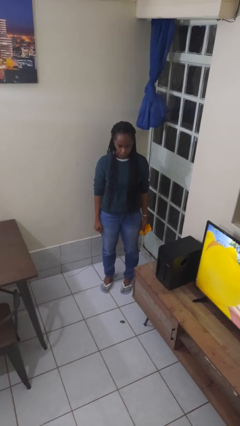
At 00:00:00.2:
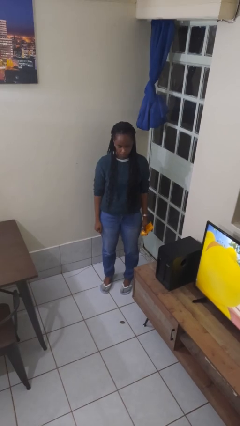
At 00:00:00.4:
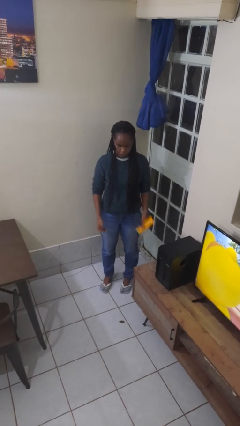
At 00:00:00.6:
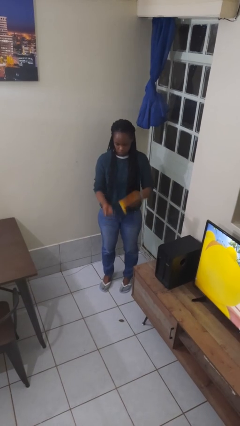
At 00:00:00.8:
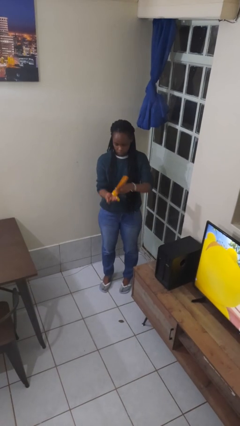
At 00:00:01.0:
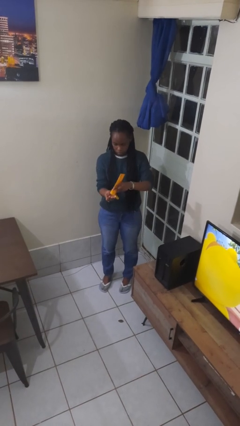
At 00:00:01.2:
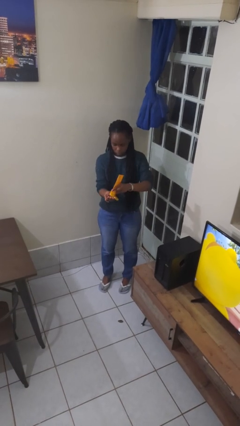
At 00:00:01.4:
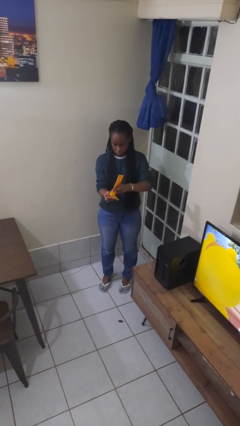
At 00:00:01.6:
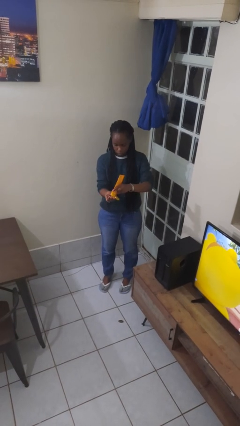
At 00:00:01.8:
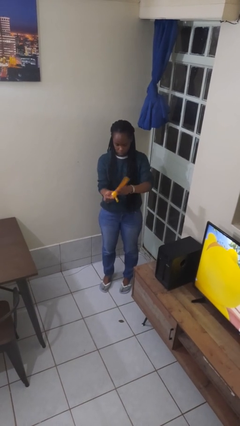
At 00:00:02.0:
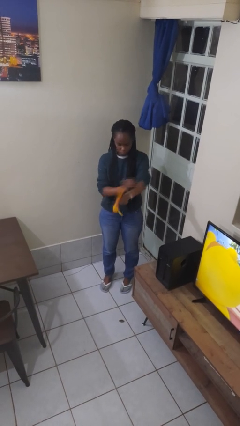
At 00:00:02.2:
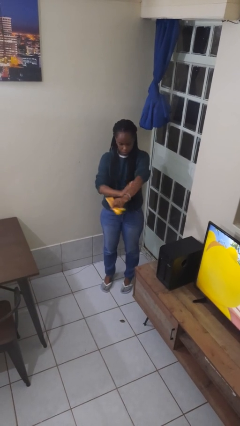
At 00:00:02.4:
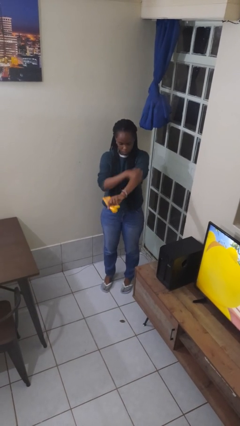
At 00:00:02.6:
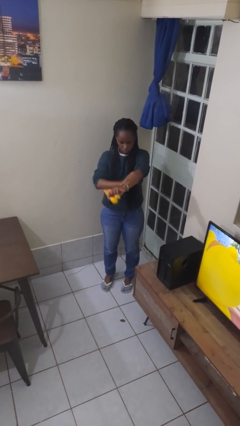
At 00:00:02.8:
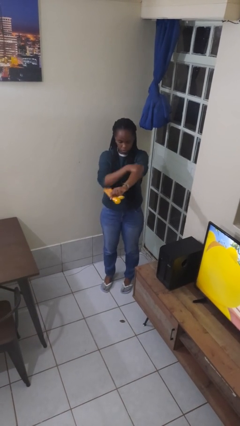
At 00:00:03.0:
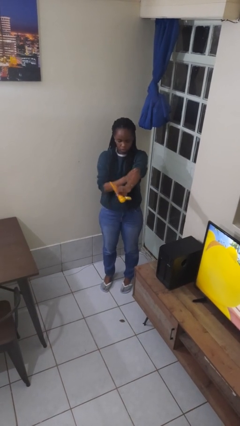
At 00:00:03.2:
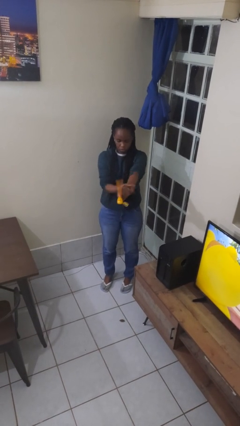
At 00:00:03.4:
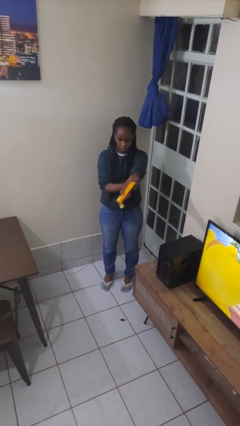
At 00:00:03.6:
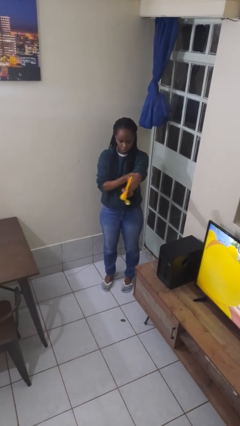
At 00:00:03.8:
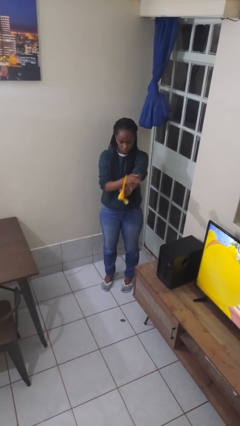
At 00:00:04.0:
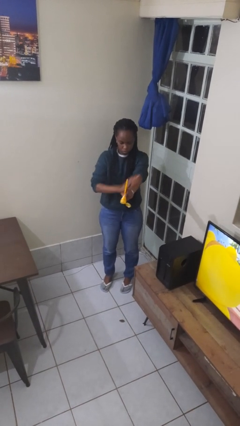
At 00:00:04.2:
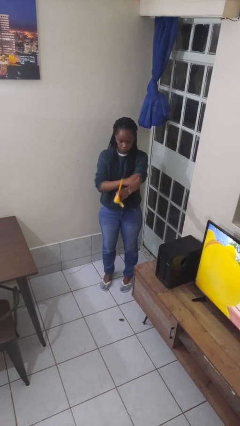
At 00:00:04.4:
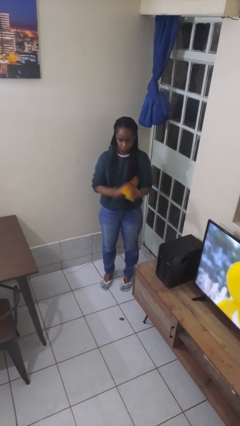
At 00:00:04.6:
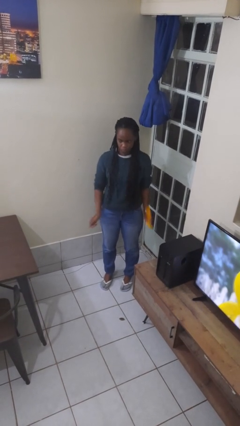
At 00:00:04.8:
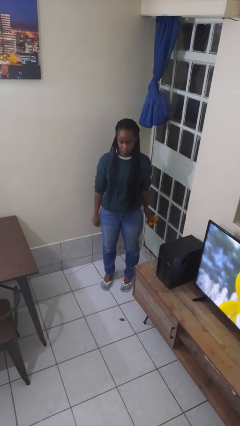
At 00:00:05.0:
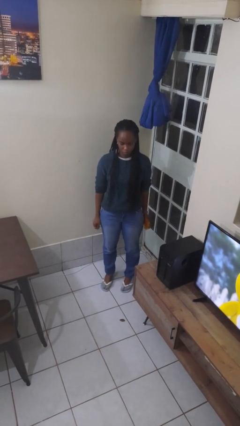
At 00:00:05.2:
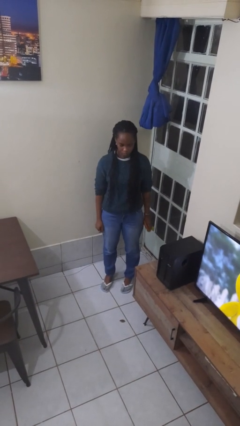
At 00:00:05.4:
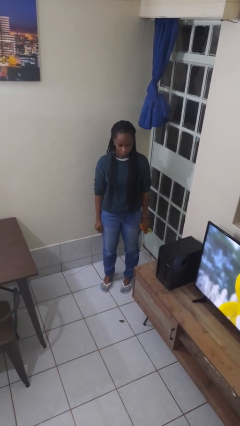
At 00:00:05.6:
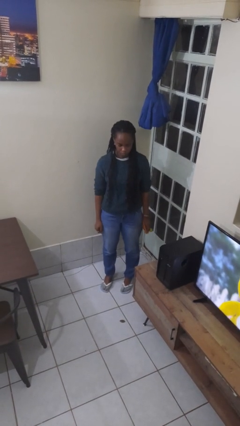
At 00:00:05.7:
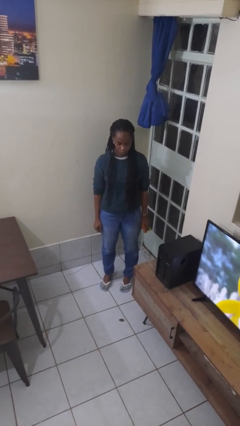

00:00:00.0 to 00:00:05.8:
person applies sunscreen

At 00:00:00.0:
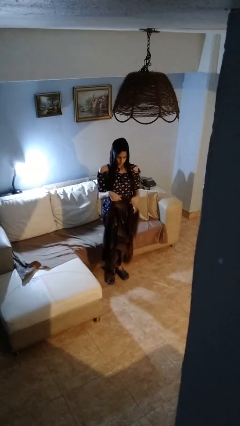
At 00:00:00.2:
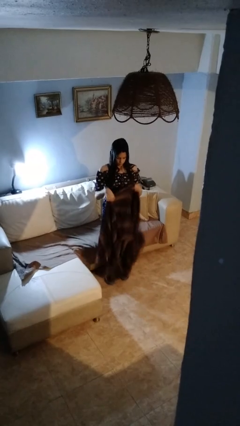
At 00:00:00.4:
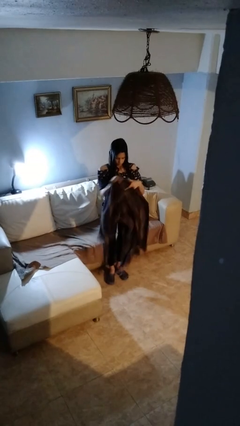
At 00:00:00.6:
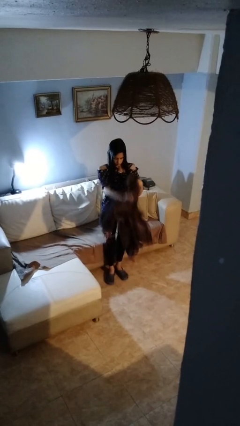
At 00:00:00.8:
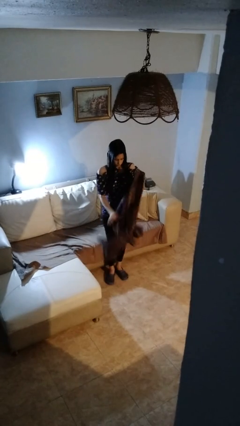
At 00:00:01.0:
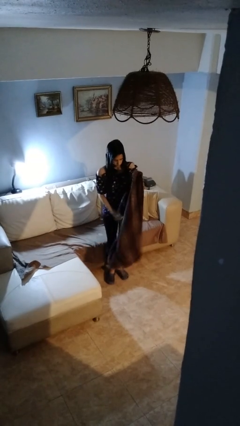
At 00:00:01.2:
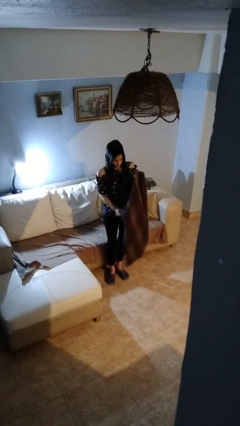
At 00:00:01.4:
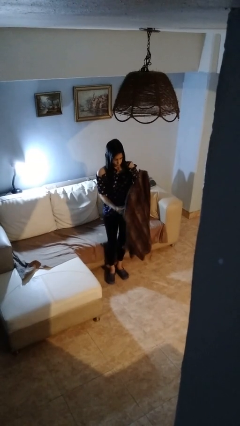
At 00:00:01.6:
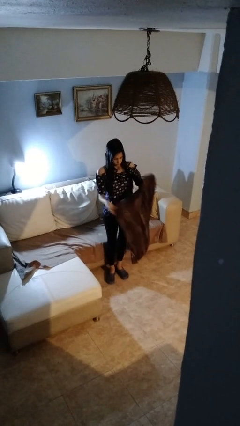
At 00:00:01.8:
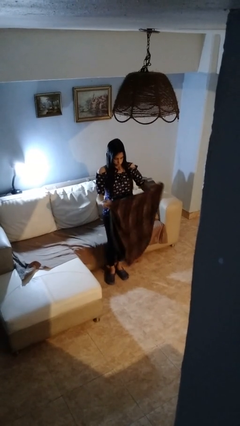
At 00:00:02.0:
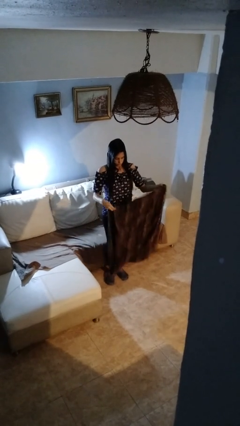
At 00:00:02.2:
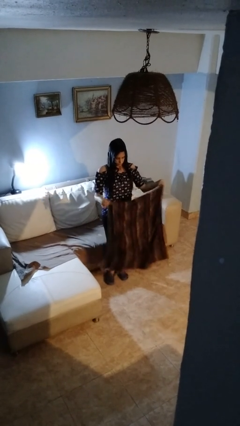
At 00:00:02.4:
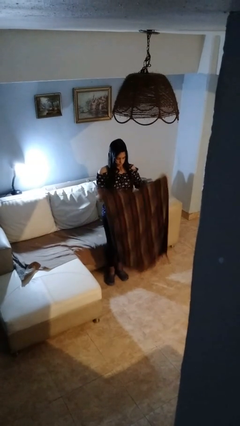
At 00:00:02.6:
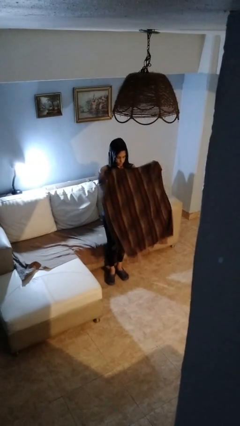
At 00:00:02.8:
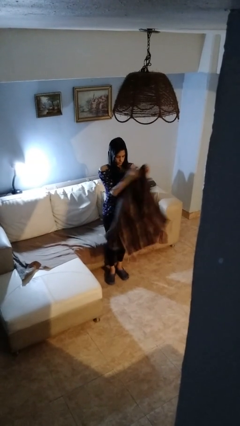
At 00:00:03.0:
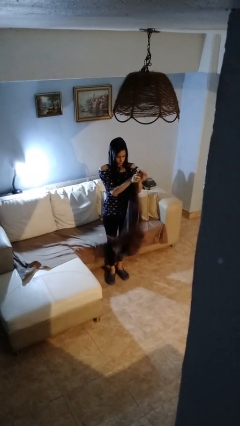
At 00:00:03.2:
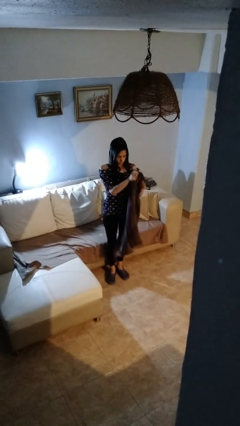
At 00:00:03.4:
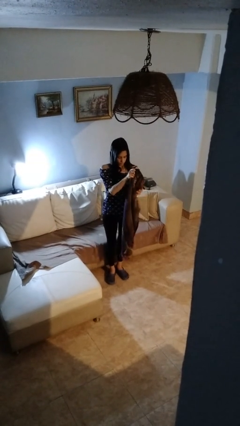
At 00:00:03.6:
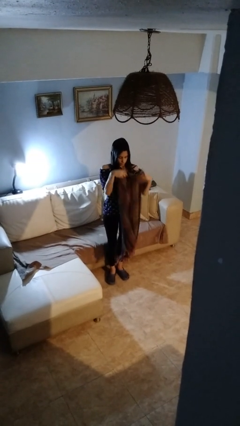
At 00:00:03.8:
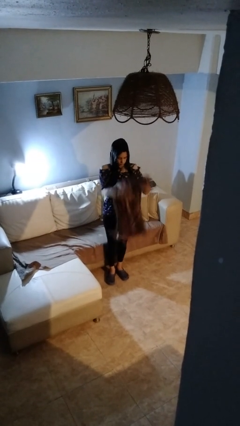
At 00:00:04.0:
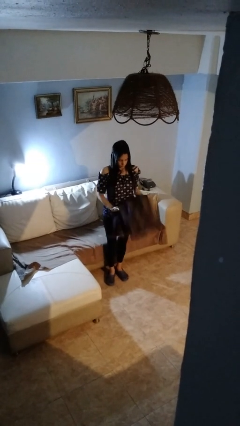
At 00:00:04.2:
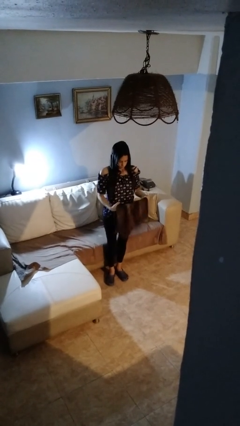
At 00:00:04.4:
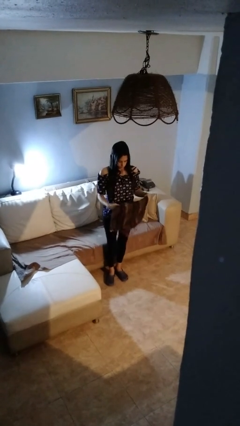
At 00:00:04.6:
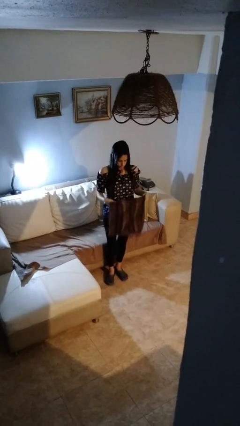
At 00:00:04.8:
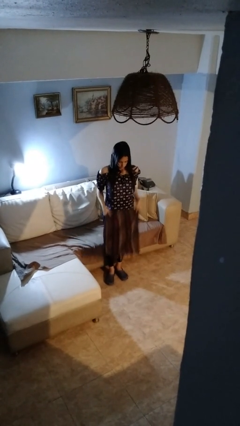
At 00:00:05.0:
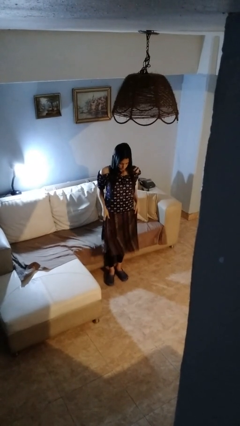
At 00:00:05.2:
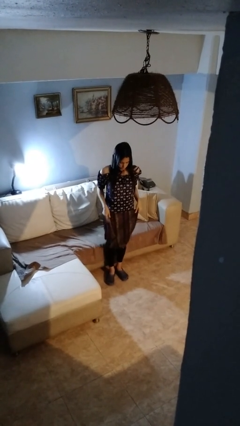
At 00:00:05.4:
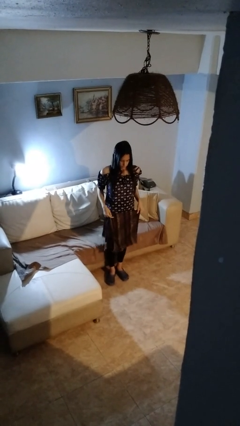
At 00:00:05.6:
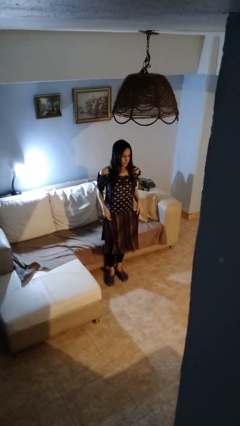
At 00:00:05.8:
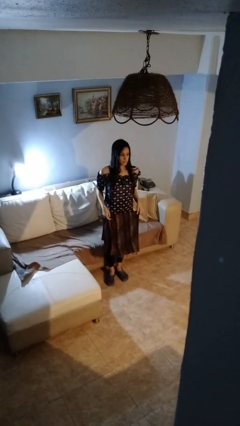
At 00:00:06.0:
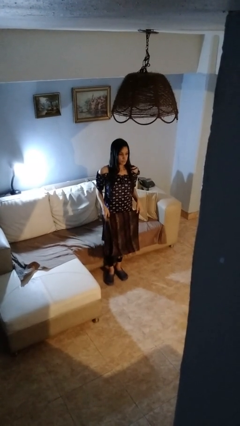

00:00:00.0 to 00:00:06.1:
person folds blanket

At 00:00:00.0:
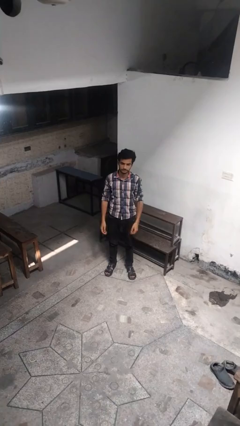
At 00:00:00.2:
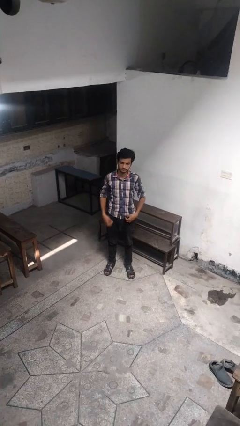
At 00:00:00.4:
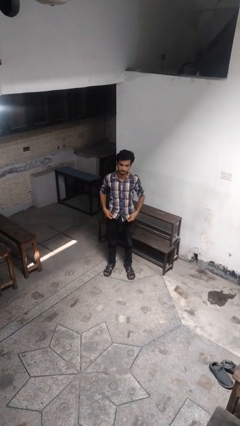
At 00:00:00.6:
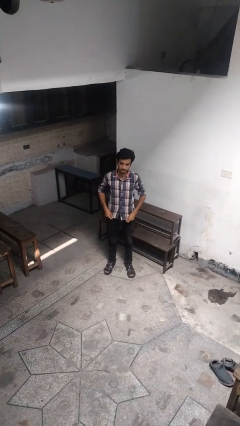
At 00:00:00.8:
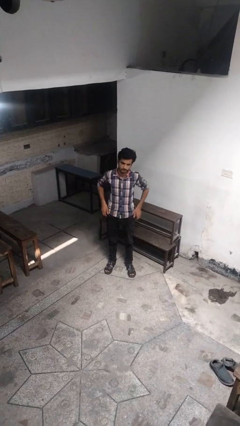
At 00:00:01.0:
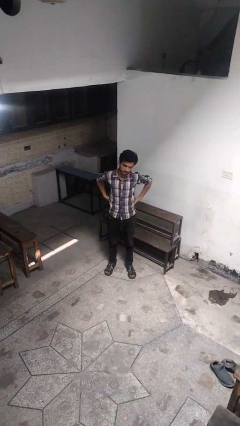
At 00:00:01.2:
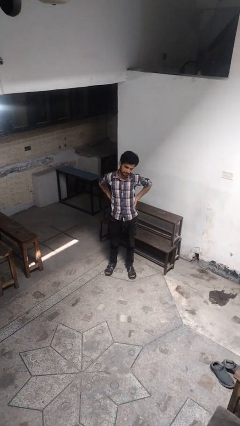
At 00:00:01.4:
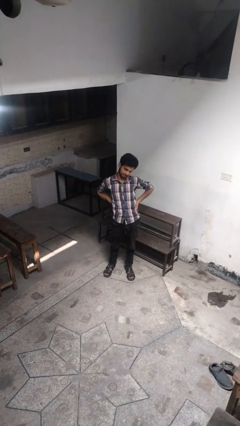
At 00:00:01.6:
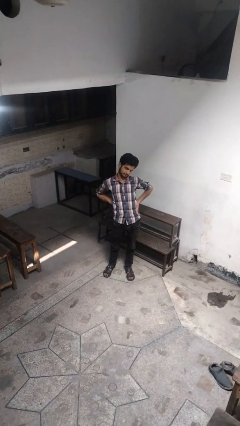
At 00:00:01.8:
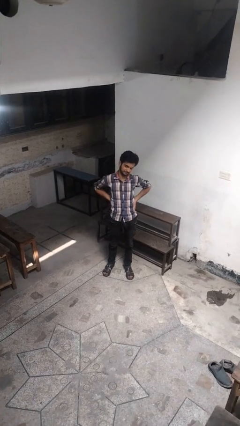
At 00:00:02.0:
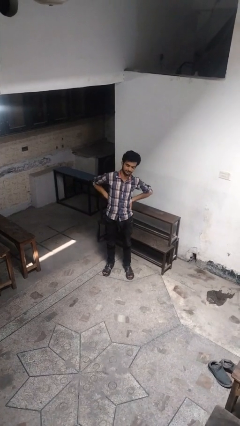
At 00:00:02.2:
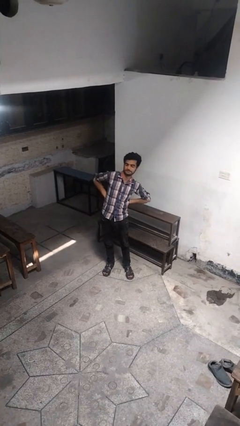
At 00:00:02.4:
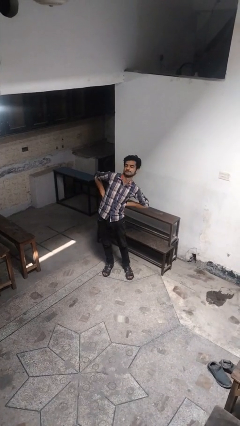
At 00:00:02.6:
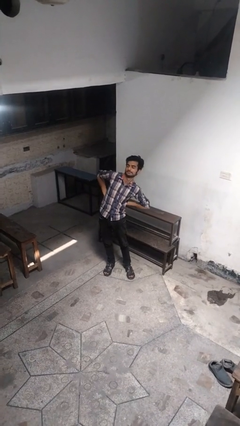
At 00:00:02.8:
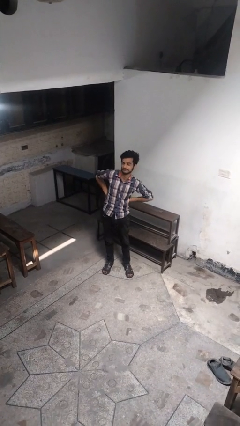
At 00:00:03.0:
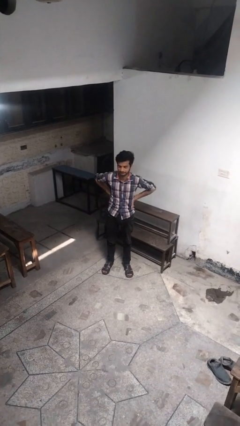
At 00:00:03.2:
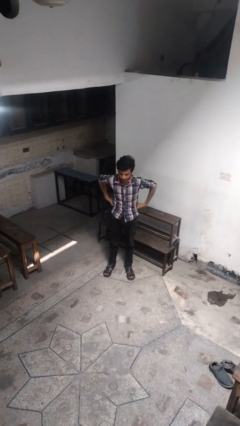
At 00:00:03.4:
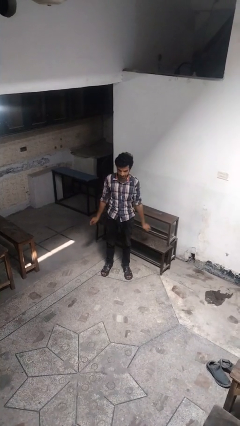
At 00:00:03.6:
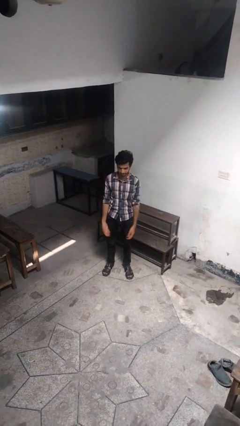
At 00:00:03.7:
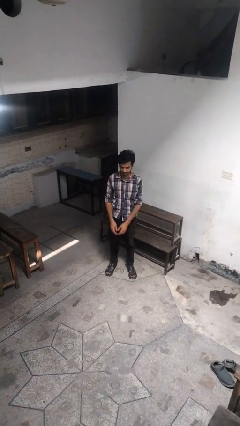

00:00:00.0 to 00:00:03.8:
person stretches back

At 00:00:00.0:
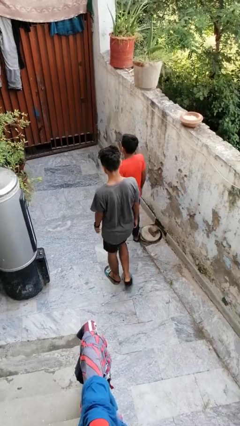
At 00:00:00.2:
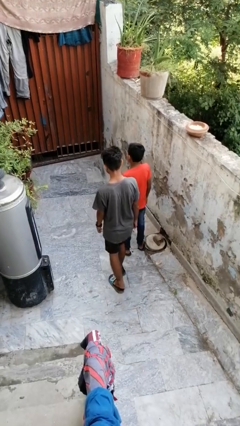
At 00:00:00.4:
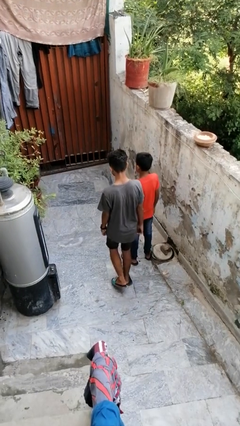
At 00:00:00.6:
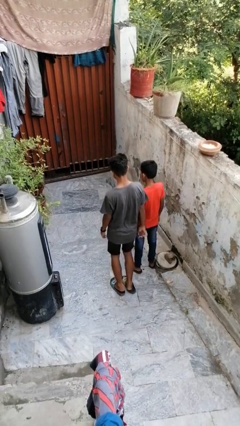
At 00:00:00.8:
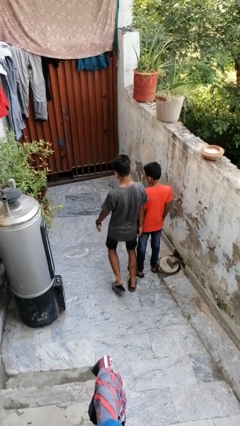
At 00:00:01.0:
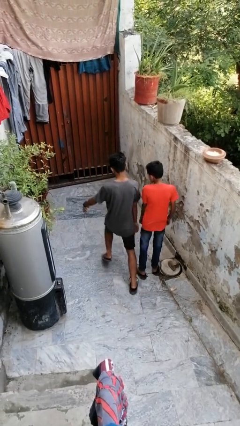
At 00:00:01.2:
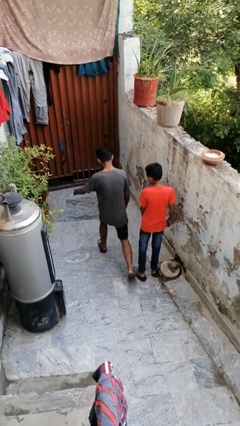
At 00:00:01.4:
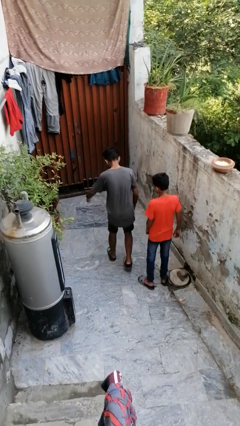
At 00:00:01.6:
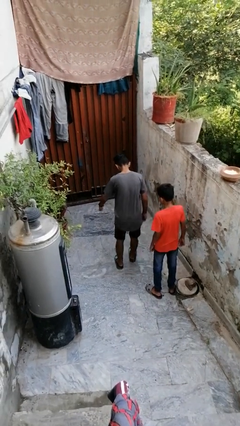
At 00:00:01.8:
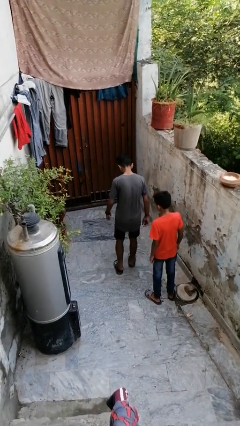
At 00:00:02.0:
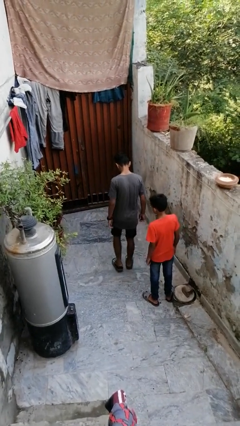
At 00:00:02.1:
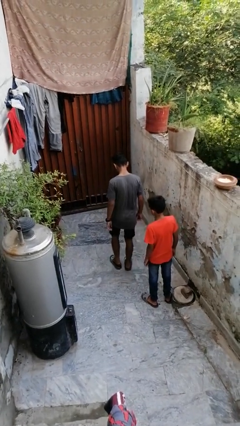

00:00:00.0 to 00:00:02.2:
person bumps into person
